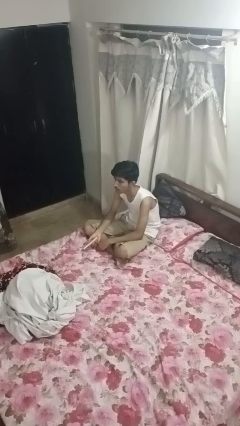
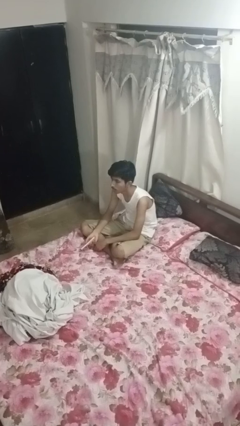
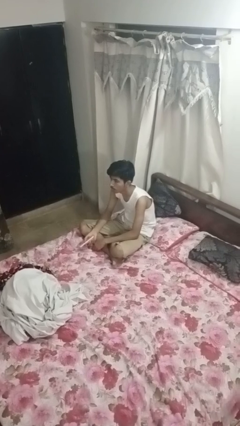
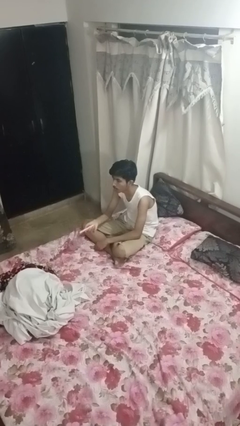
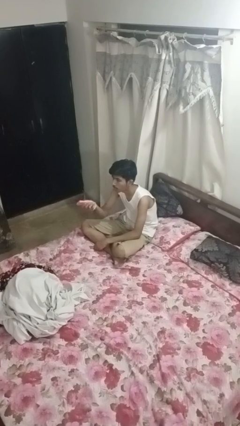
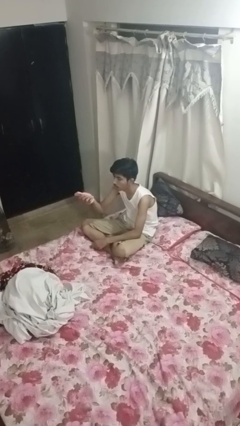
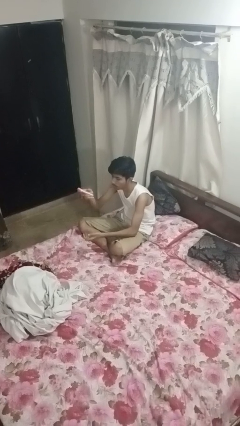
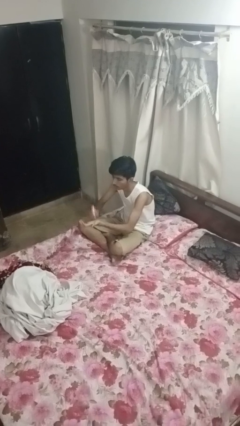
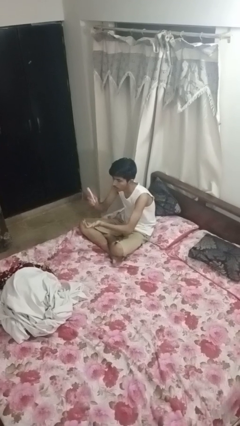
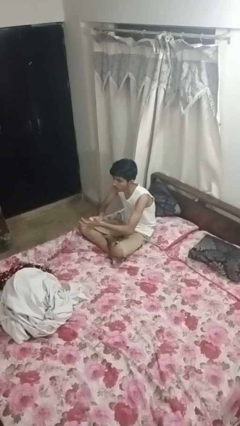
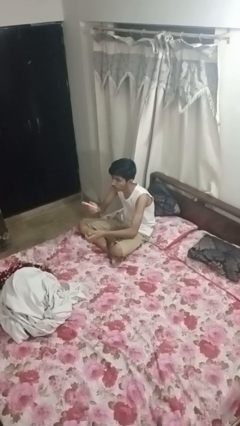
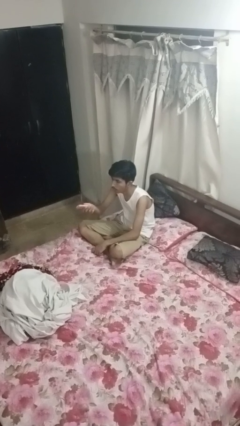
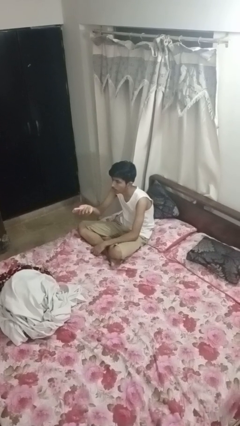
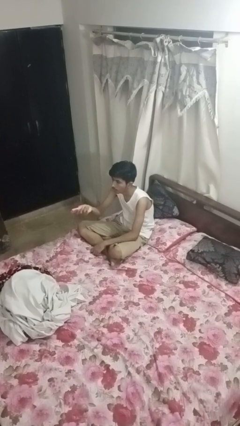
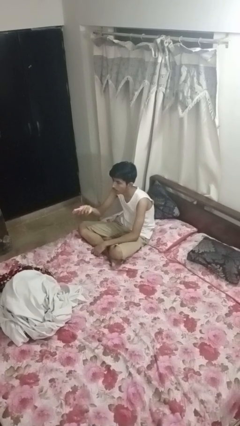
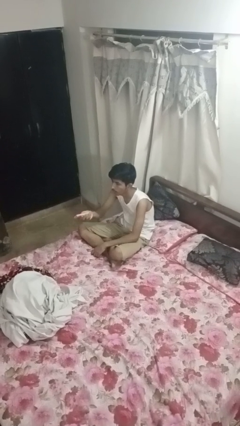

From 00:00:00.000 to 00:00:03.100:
person uses television remote

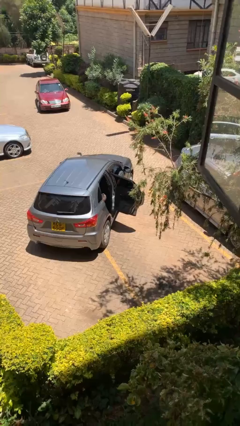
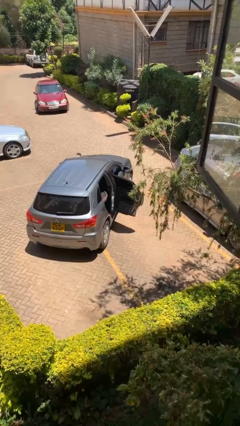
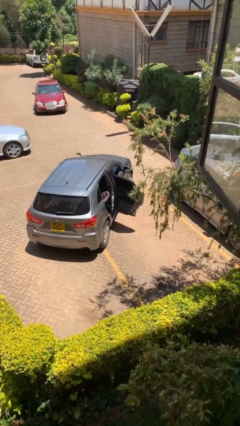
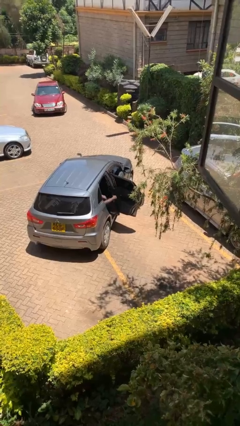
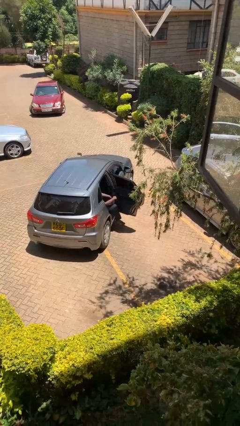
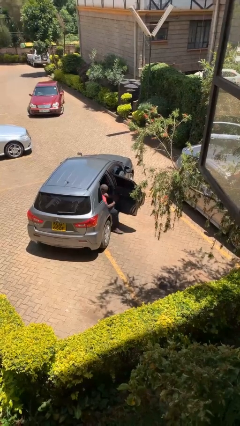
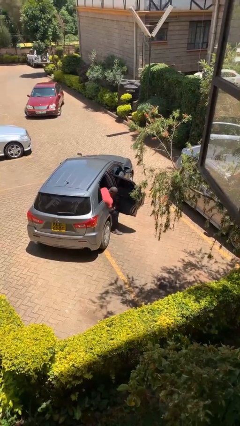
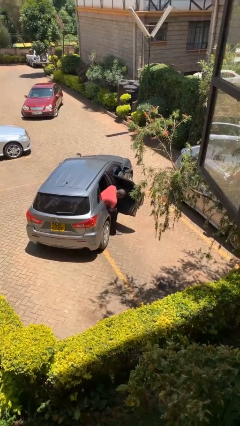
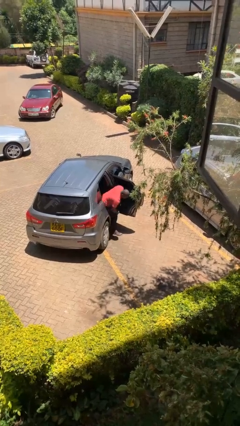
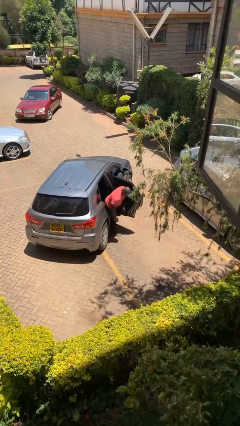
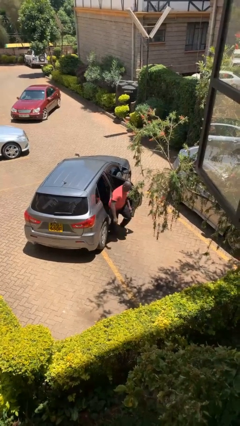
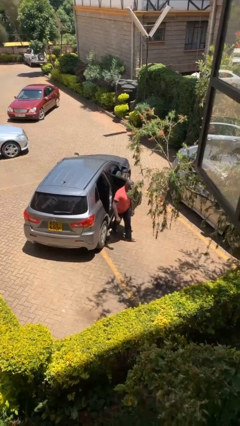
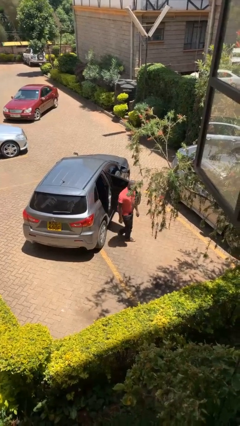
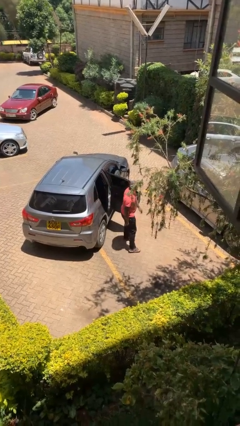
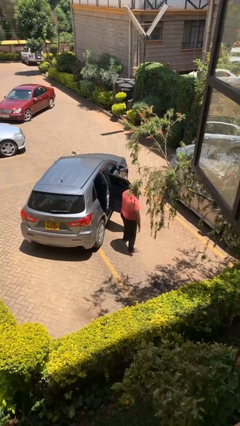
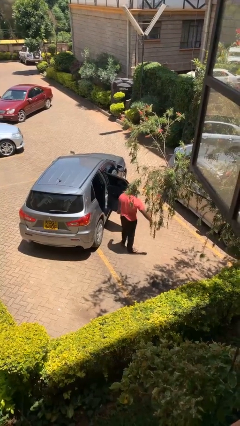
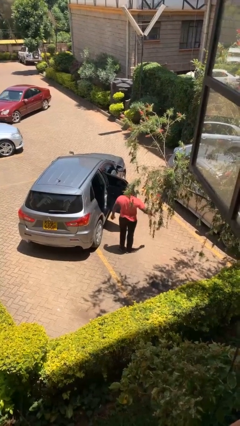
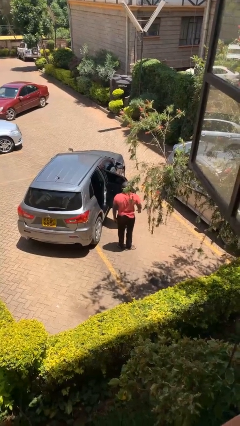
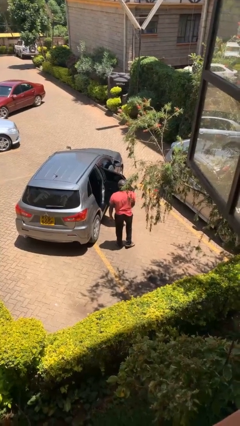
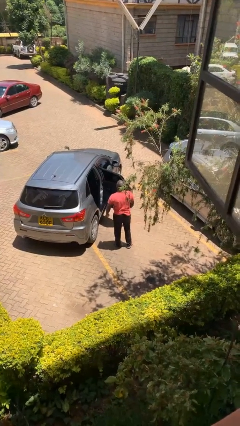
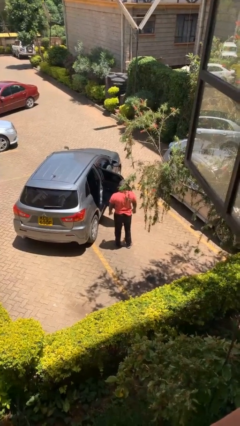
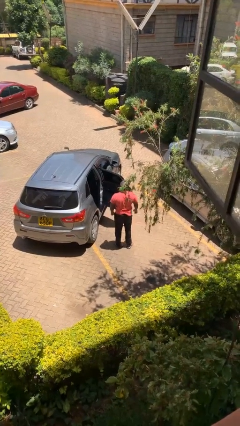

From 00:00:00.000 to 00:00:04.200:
person exits car

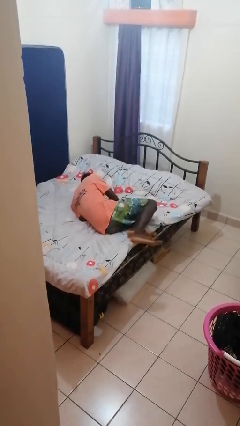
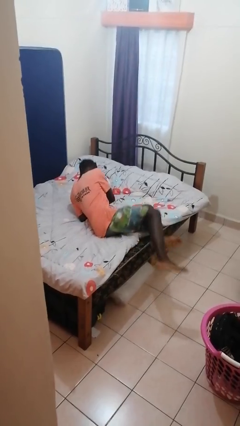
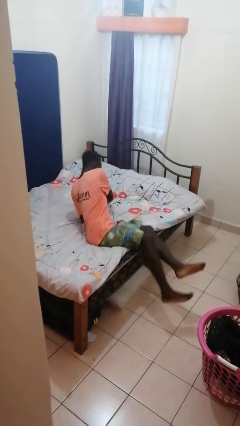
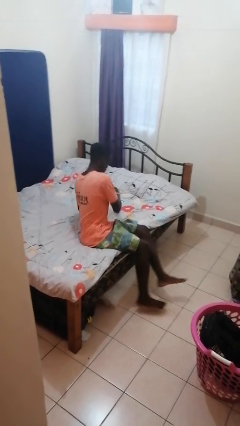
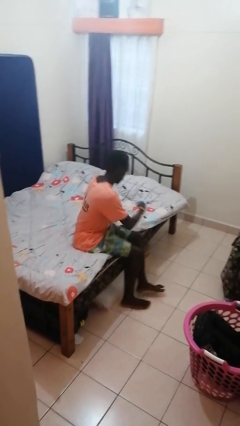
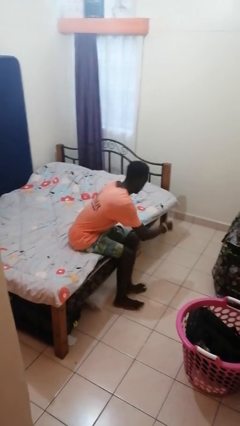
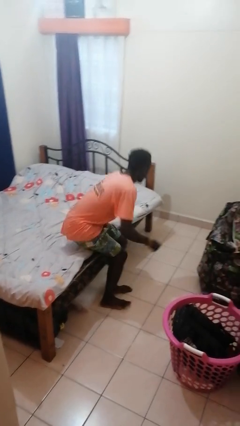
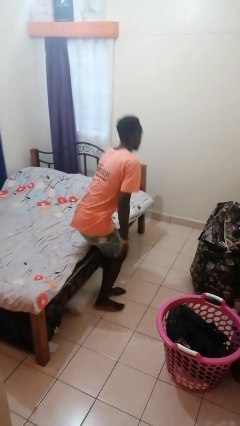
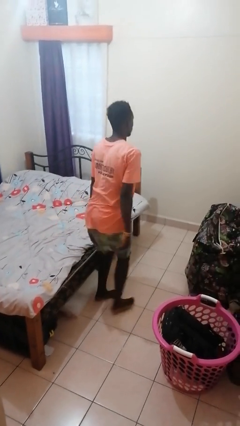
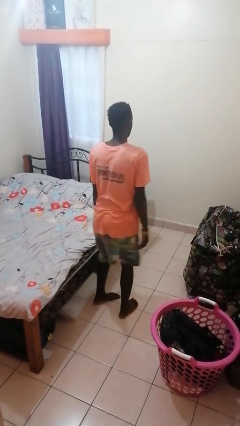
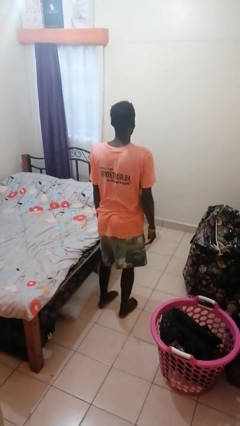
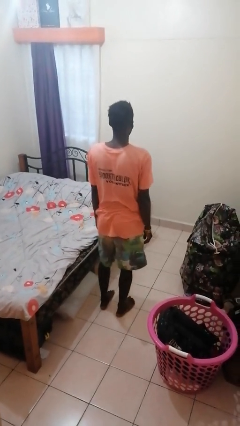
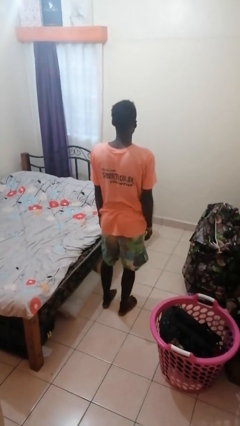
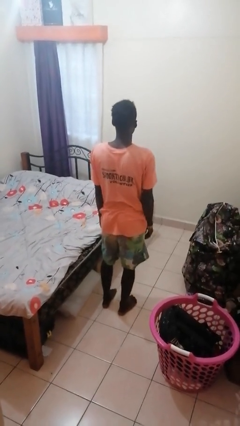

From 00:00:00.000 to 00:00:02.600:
person stands up

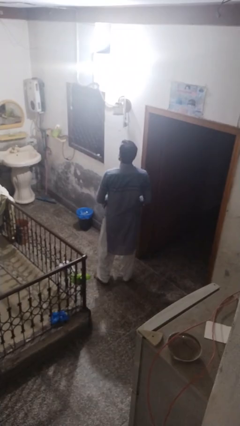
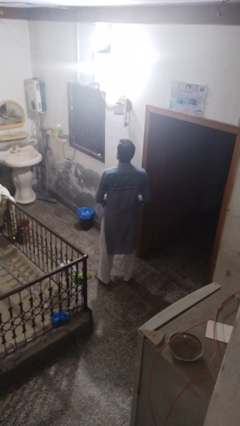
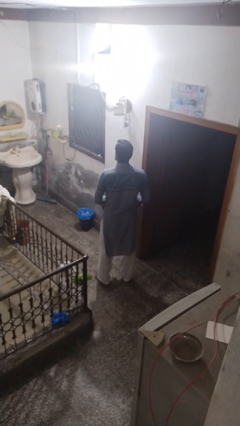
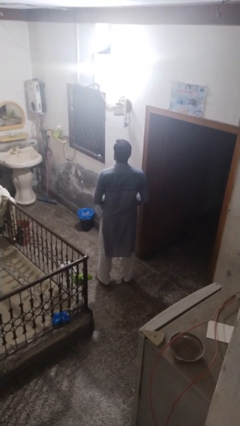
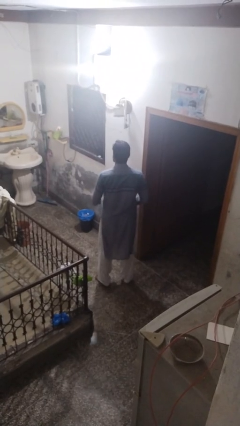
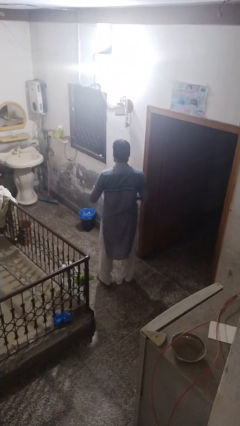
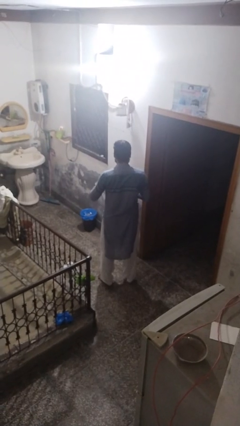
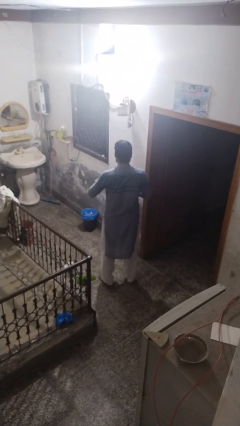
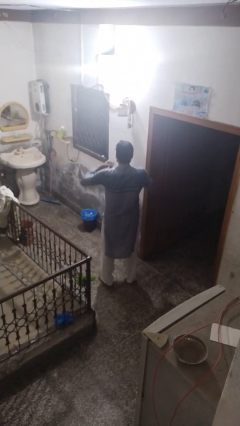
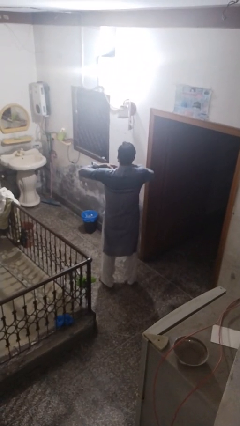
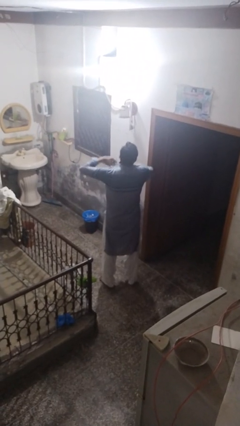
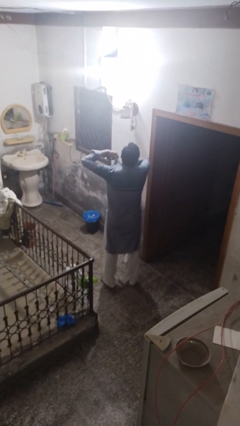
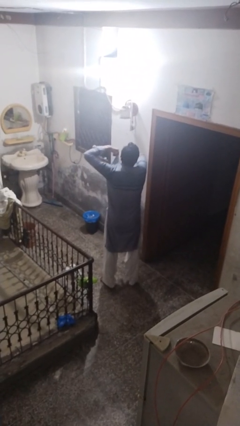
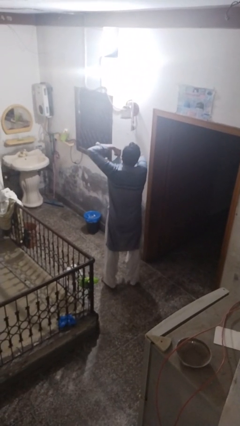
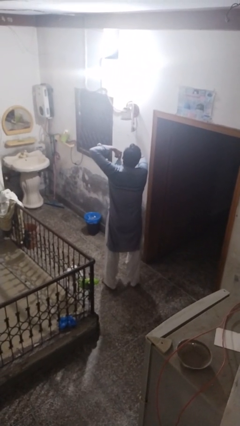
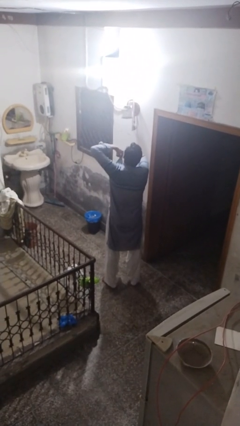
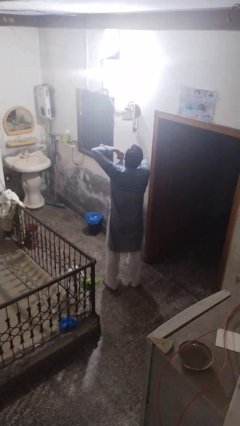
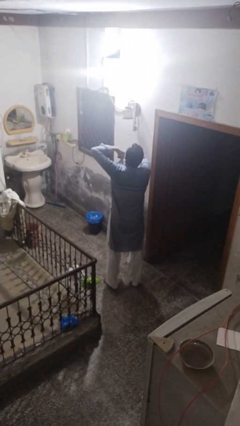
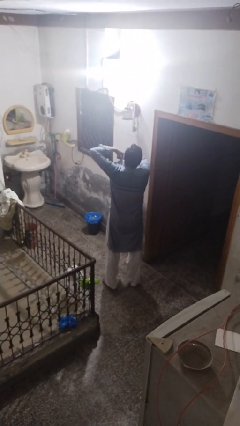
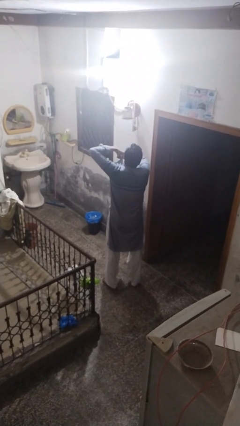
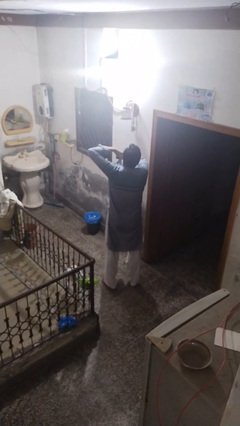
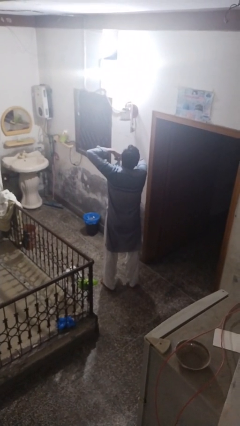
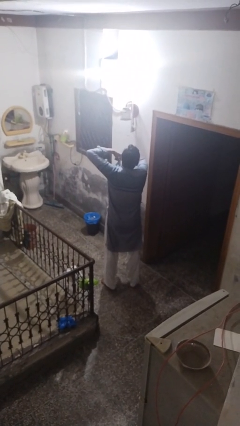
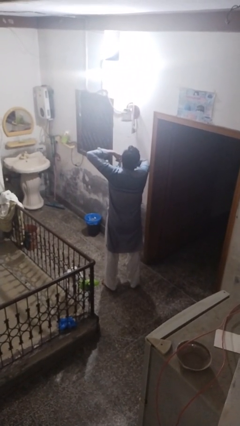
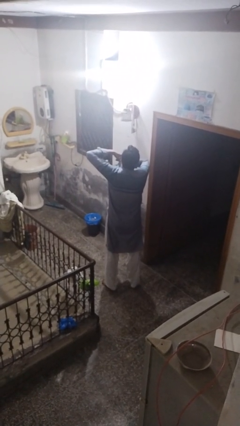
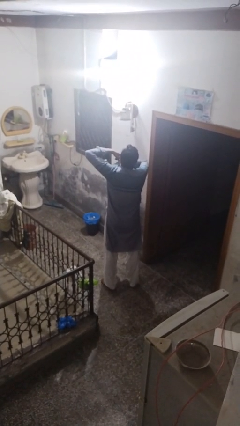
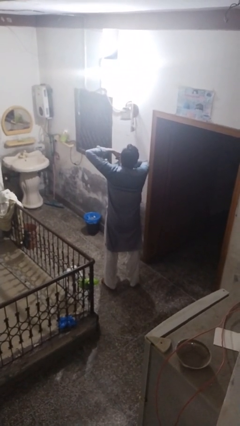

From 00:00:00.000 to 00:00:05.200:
person applies deodorant

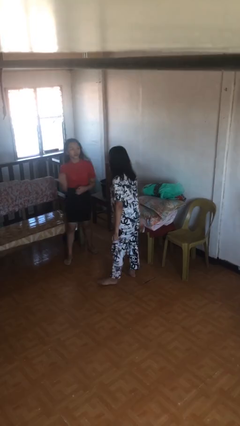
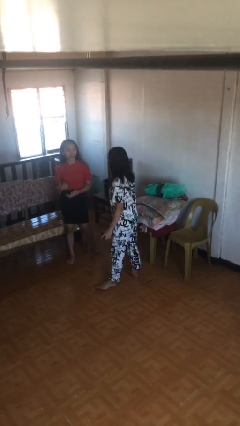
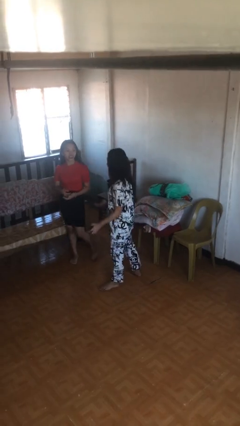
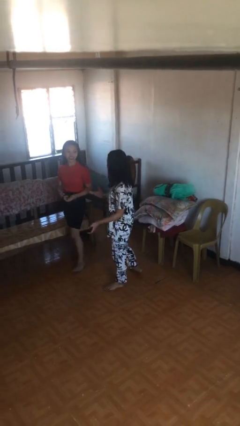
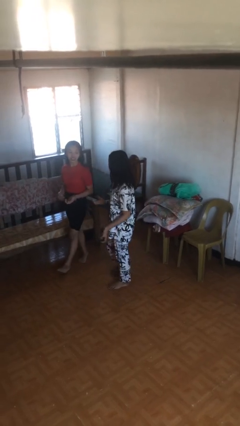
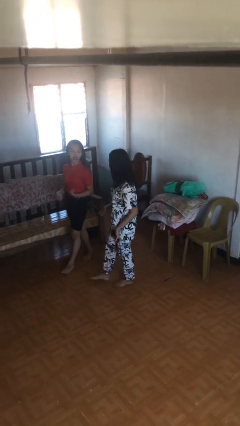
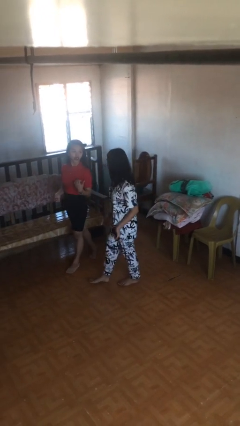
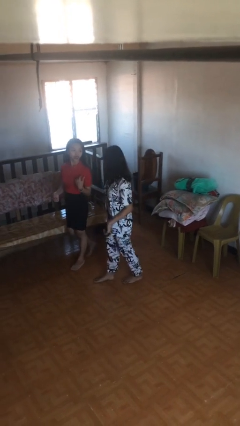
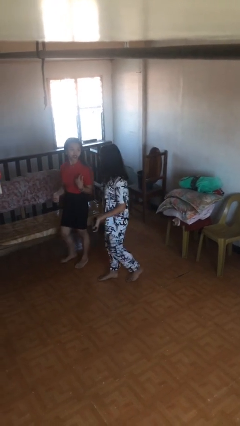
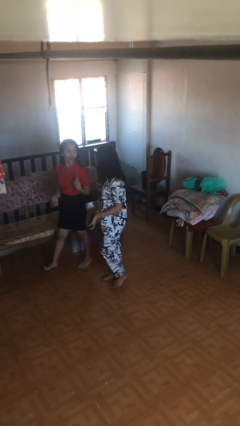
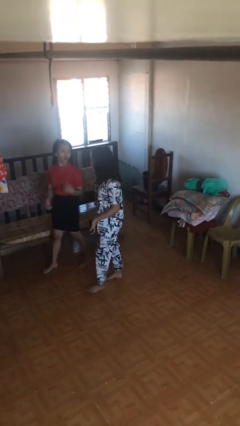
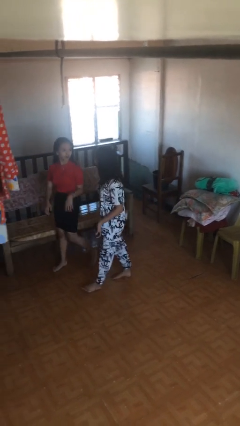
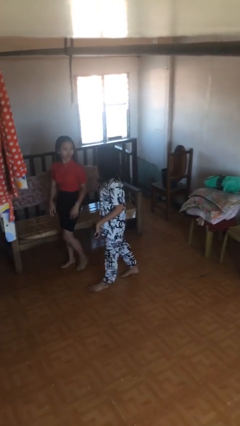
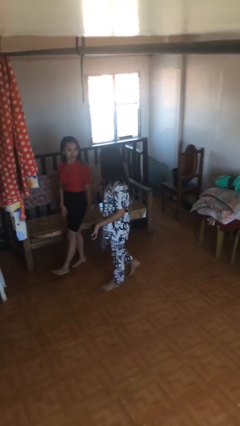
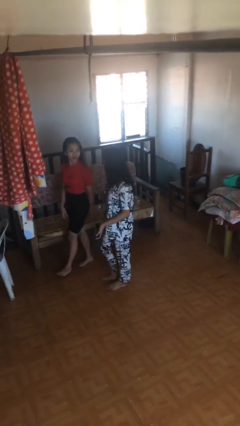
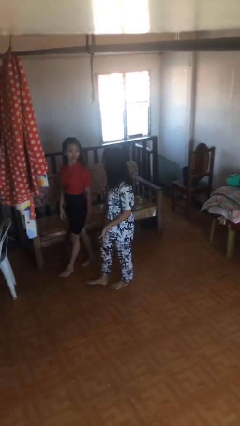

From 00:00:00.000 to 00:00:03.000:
person talks to person
